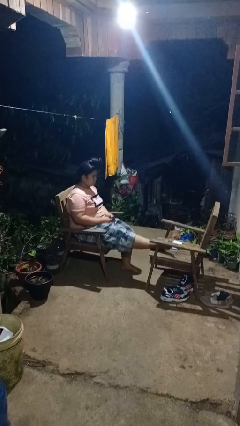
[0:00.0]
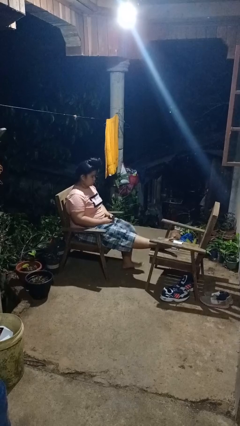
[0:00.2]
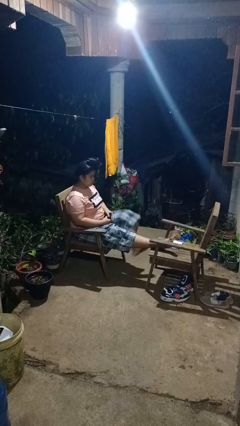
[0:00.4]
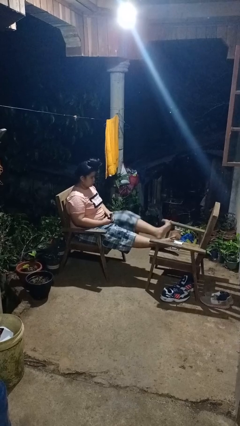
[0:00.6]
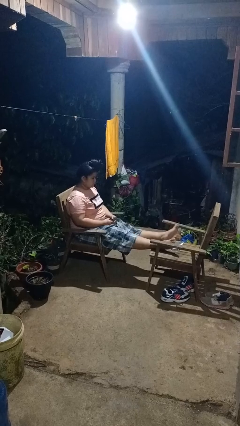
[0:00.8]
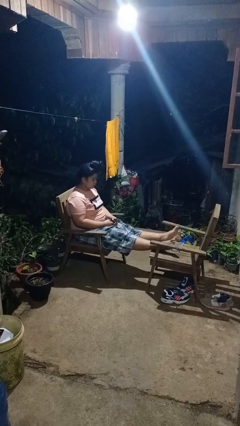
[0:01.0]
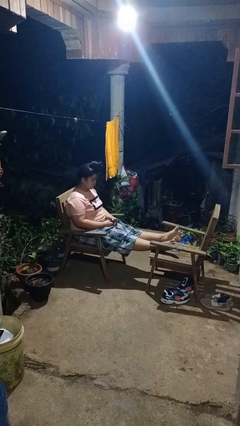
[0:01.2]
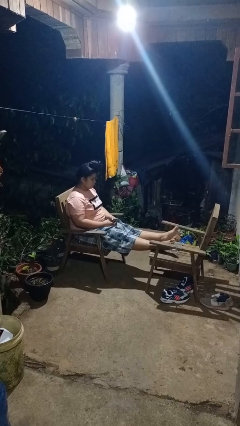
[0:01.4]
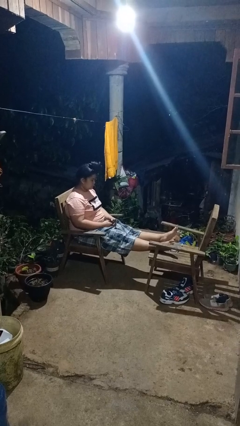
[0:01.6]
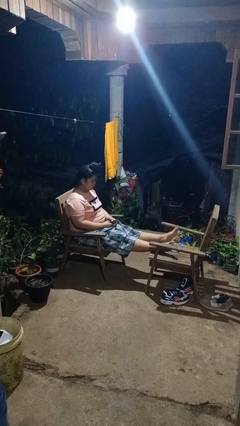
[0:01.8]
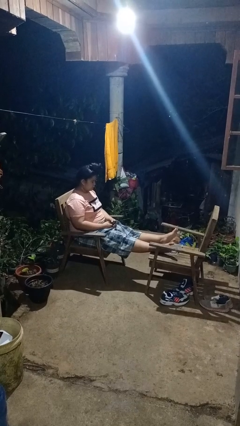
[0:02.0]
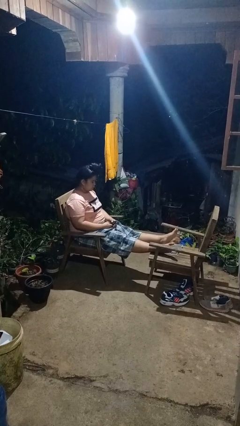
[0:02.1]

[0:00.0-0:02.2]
person puts feet up

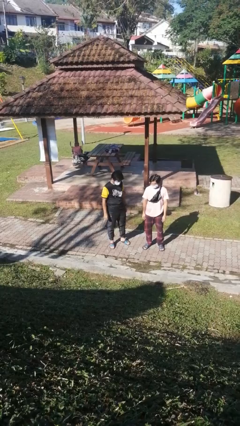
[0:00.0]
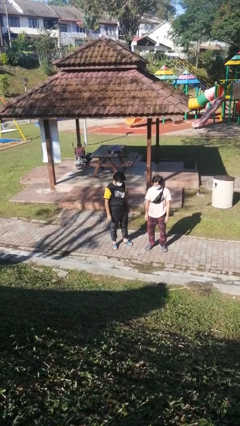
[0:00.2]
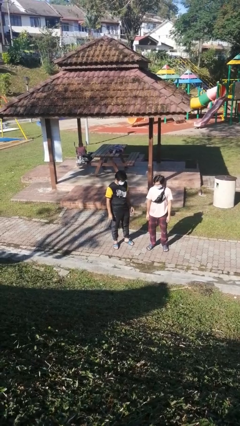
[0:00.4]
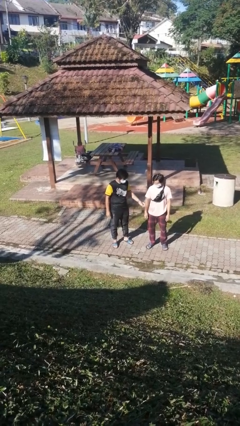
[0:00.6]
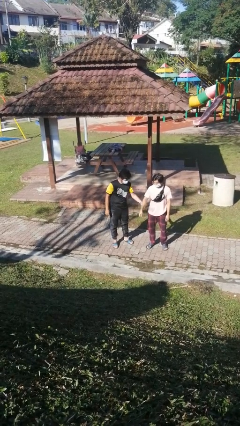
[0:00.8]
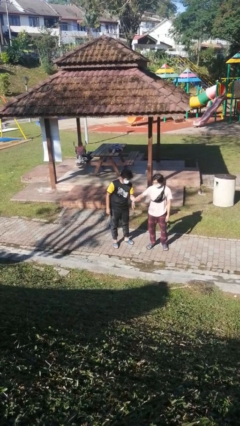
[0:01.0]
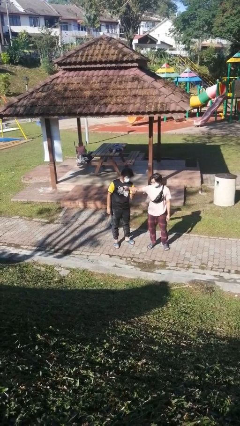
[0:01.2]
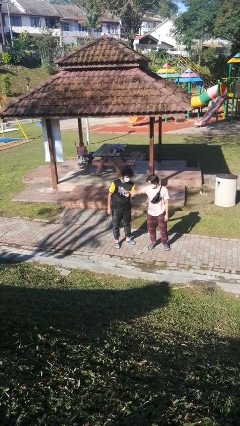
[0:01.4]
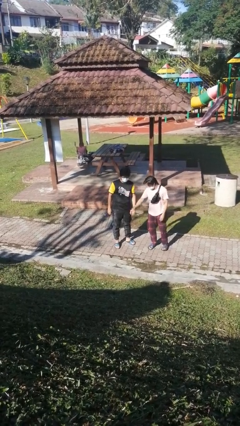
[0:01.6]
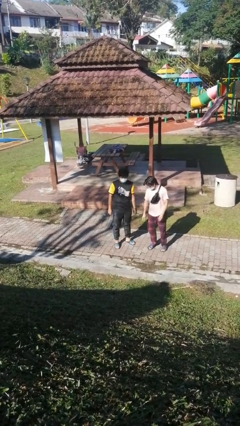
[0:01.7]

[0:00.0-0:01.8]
person grabs person by forearm

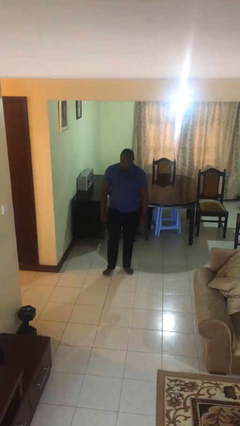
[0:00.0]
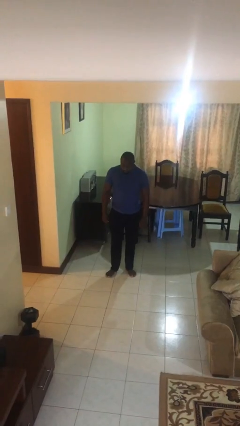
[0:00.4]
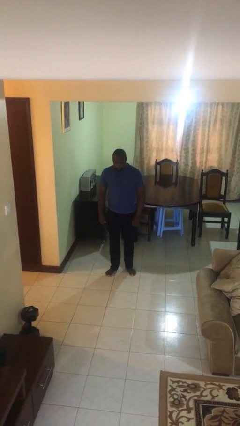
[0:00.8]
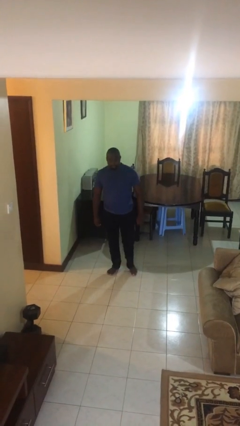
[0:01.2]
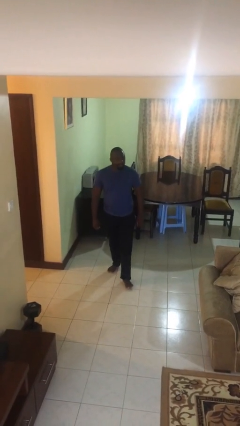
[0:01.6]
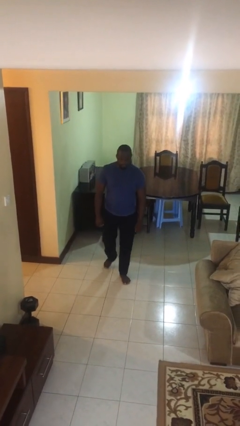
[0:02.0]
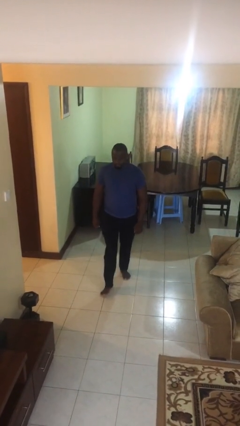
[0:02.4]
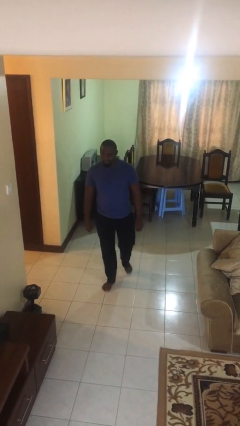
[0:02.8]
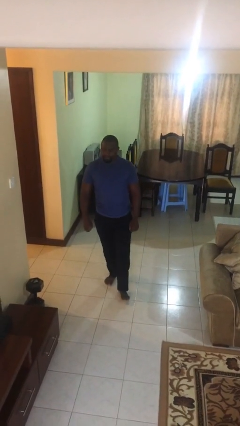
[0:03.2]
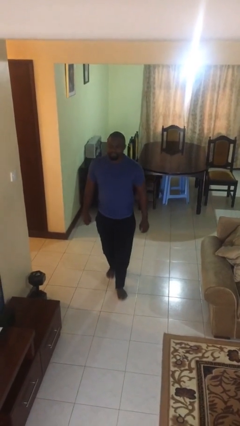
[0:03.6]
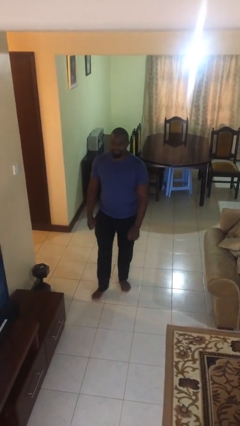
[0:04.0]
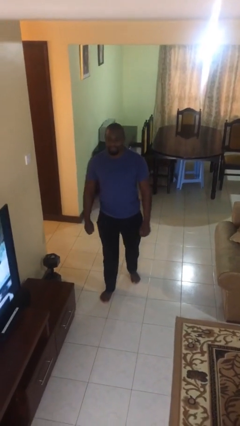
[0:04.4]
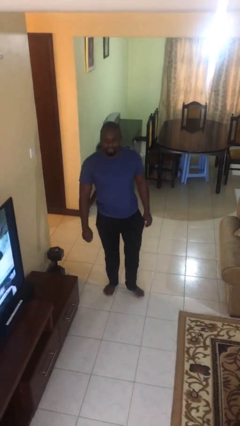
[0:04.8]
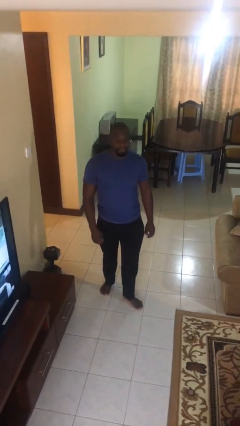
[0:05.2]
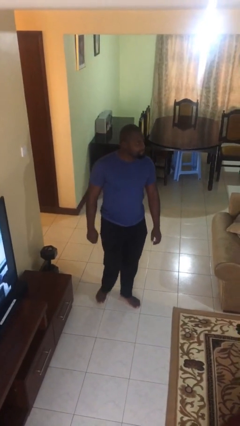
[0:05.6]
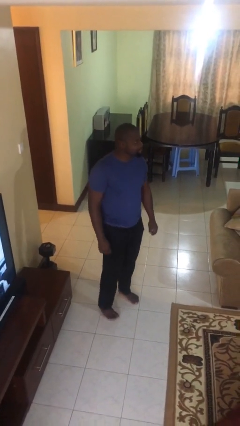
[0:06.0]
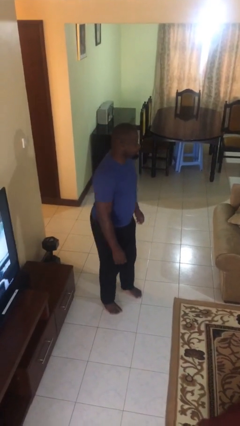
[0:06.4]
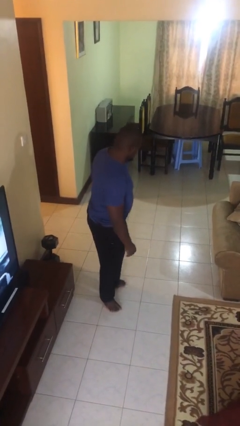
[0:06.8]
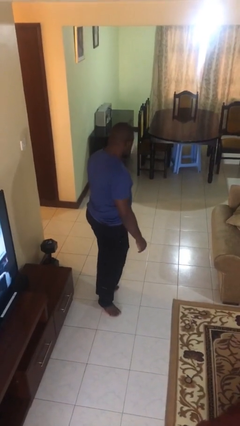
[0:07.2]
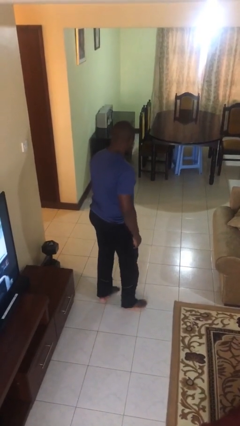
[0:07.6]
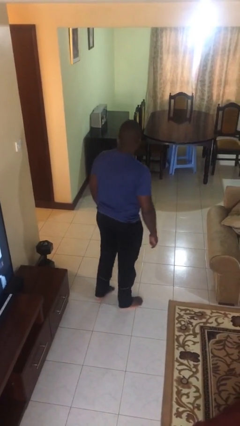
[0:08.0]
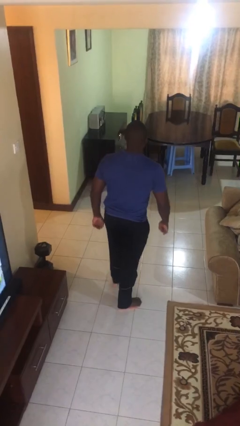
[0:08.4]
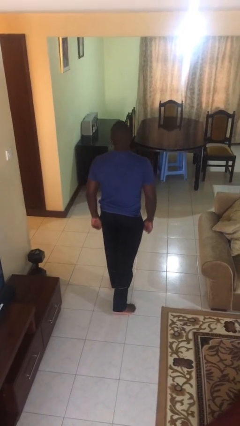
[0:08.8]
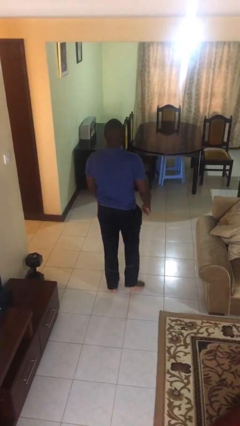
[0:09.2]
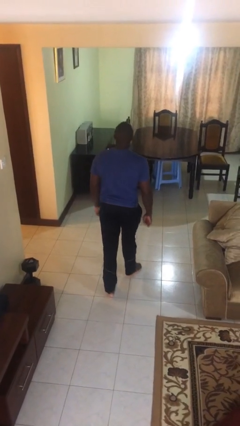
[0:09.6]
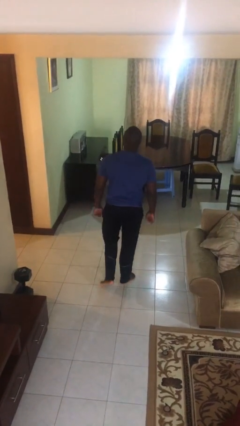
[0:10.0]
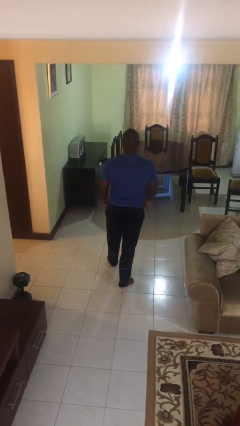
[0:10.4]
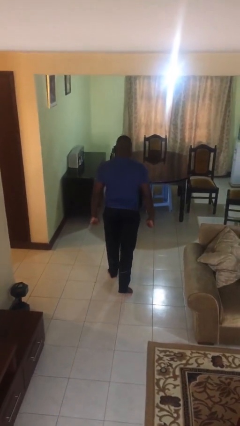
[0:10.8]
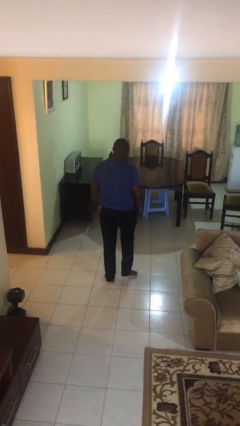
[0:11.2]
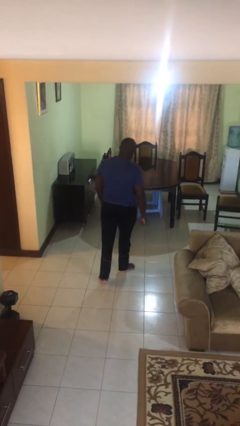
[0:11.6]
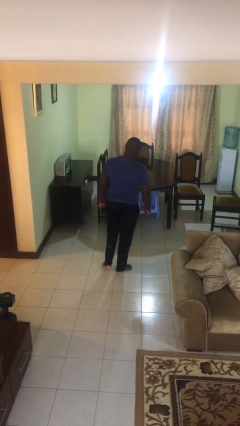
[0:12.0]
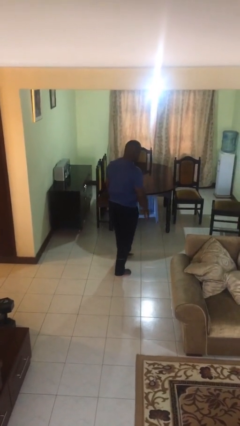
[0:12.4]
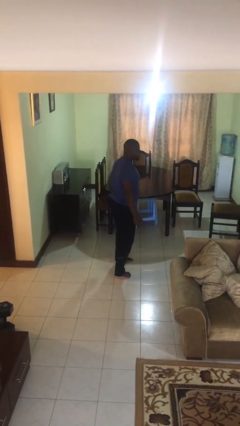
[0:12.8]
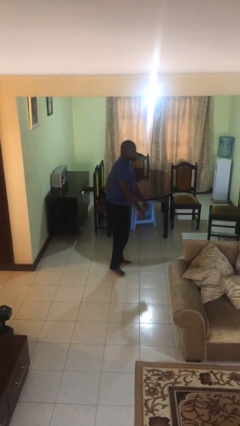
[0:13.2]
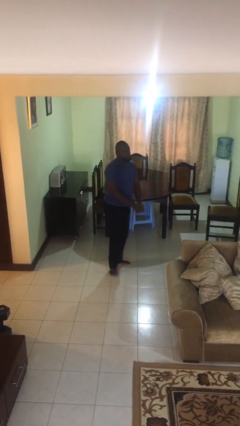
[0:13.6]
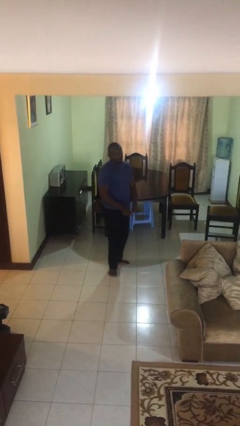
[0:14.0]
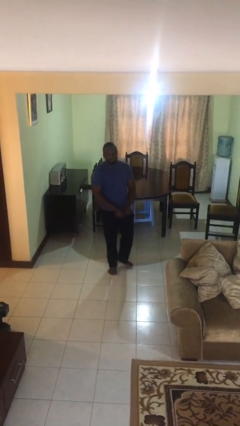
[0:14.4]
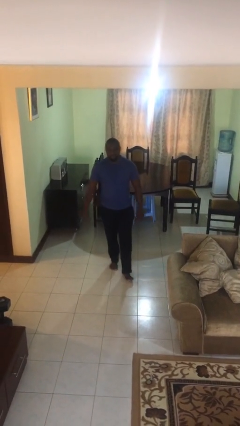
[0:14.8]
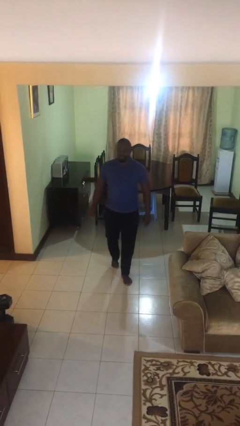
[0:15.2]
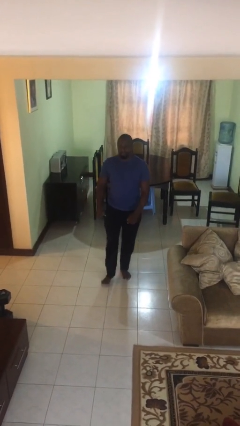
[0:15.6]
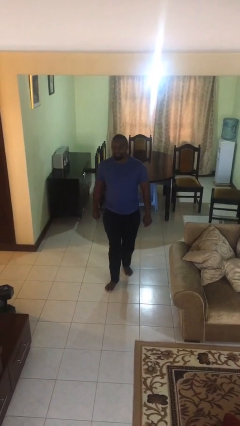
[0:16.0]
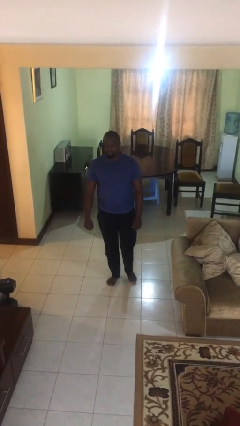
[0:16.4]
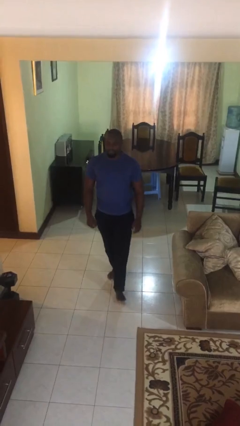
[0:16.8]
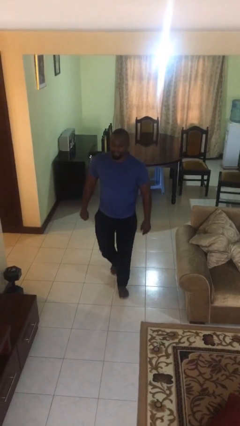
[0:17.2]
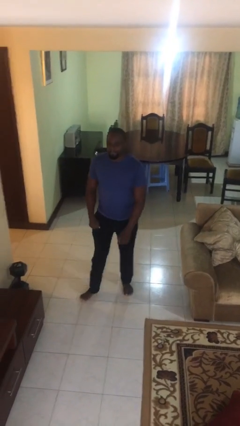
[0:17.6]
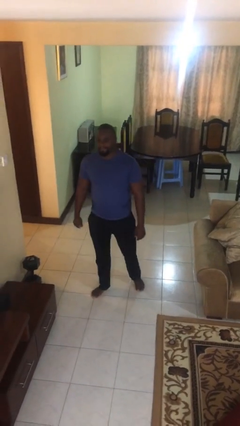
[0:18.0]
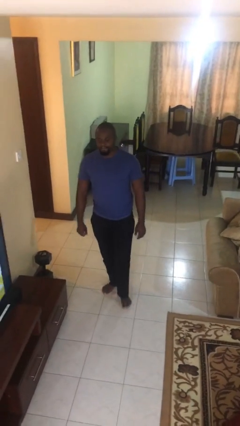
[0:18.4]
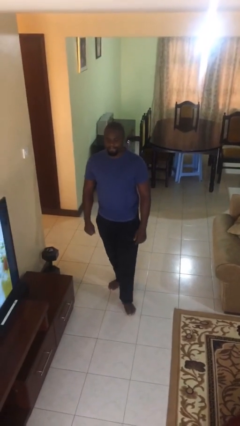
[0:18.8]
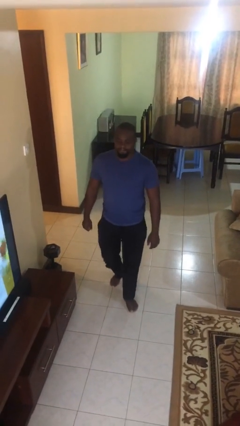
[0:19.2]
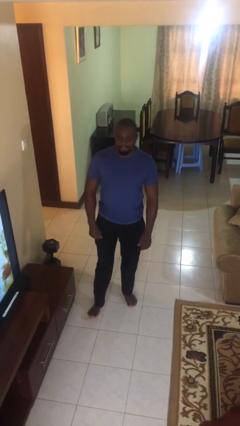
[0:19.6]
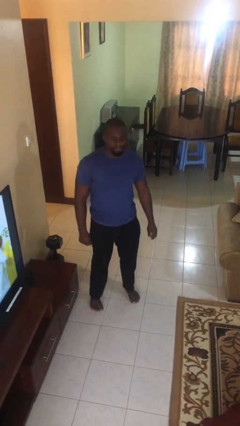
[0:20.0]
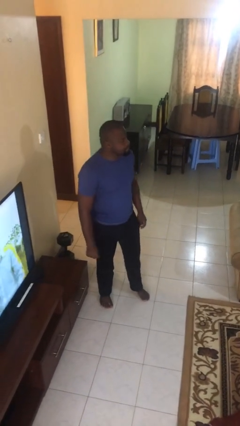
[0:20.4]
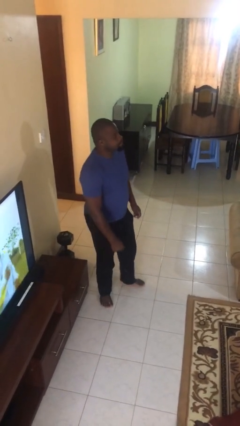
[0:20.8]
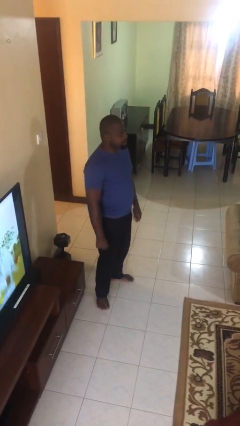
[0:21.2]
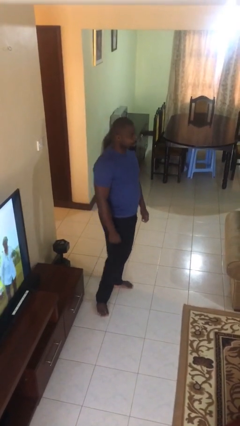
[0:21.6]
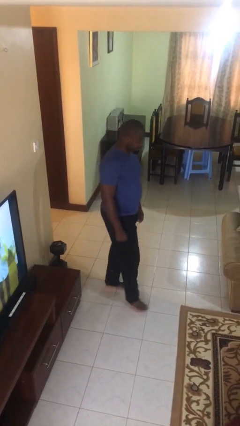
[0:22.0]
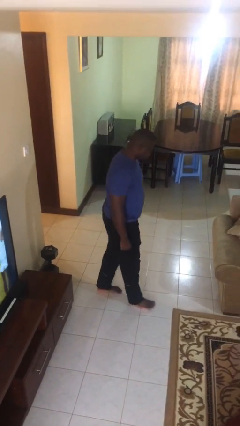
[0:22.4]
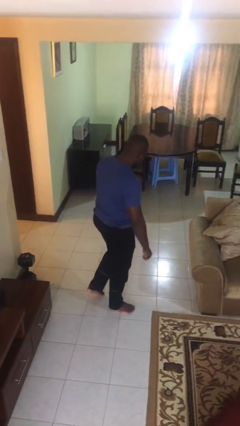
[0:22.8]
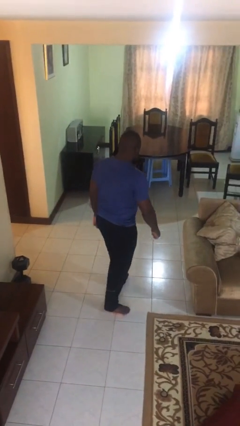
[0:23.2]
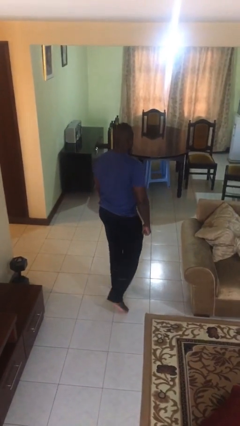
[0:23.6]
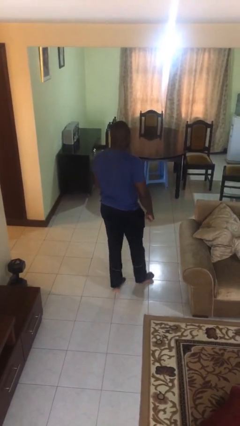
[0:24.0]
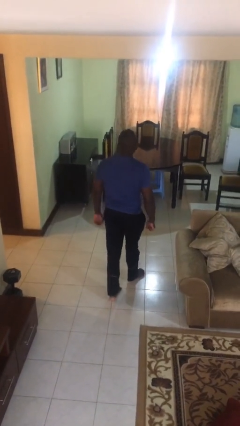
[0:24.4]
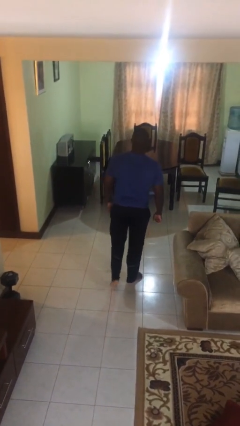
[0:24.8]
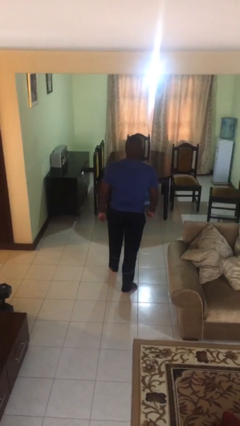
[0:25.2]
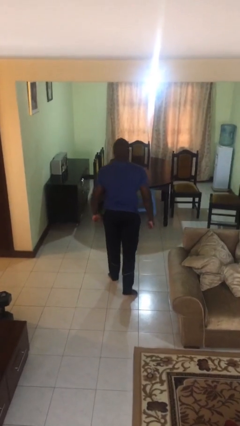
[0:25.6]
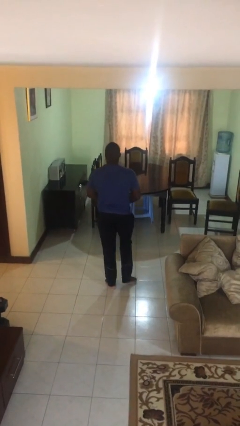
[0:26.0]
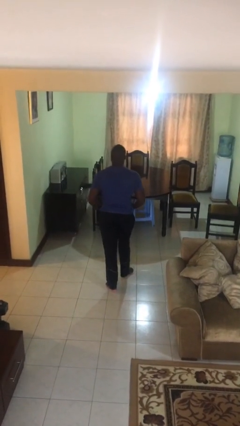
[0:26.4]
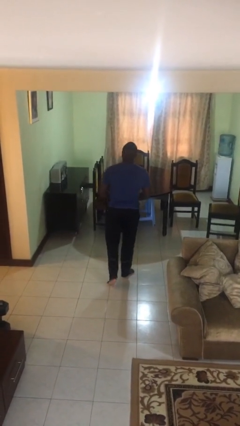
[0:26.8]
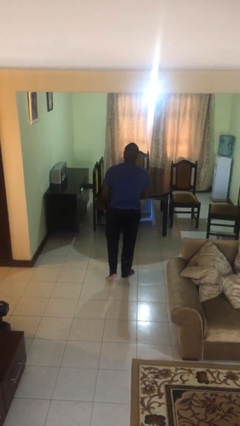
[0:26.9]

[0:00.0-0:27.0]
person walks

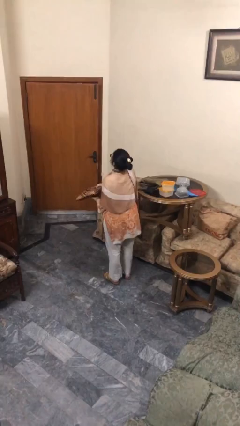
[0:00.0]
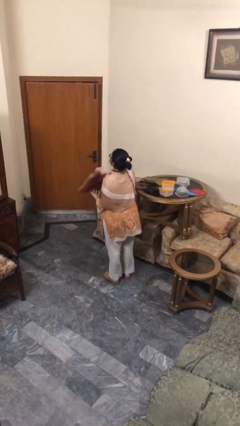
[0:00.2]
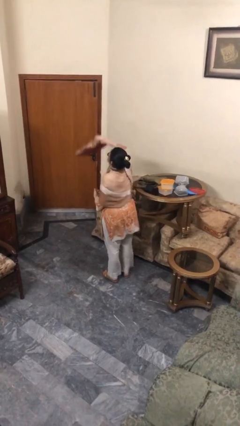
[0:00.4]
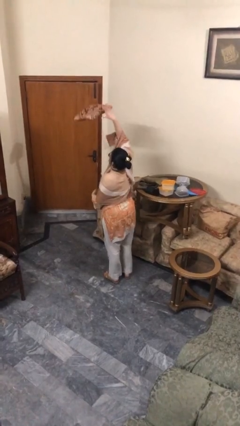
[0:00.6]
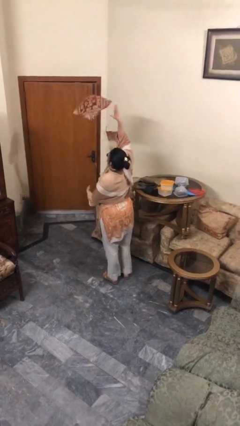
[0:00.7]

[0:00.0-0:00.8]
person drops object
